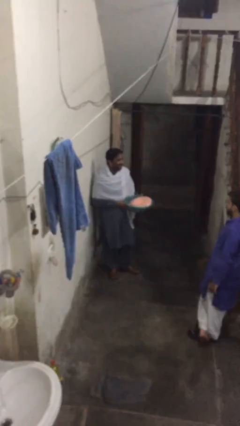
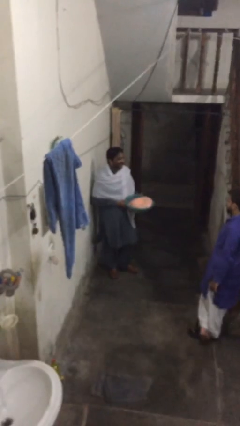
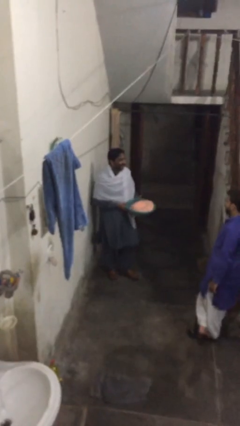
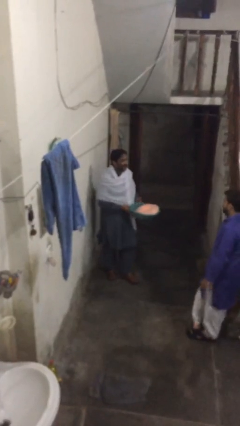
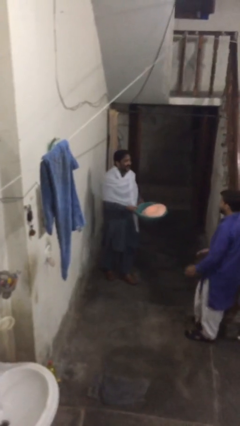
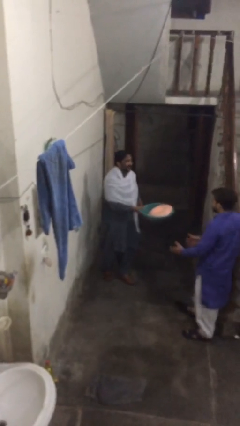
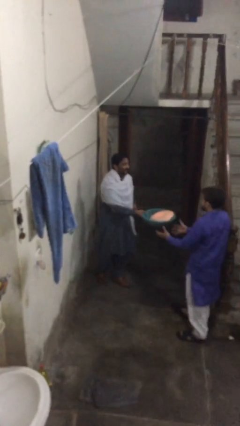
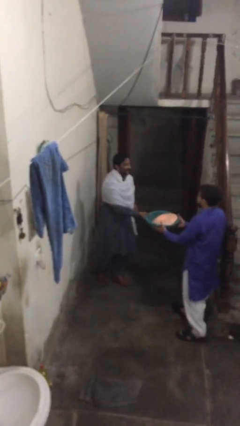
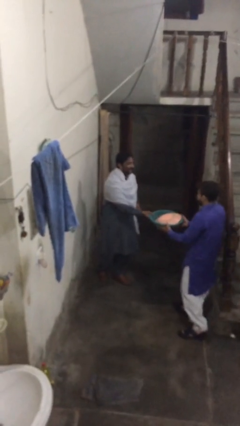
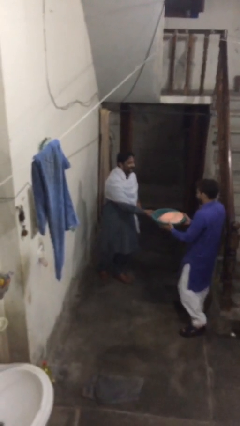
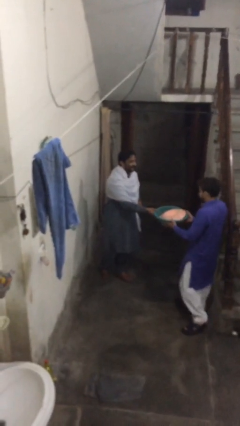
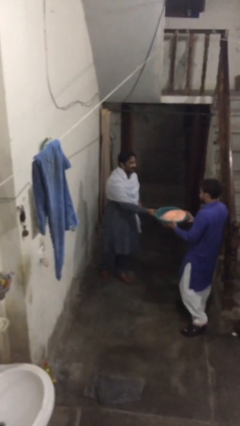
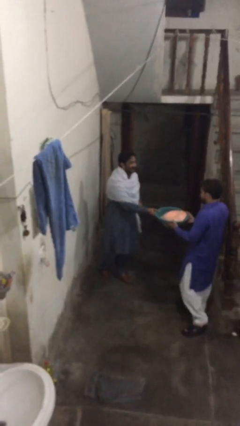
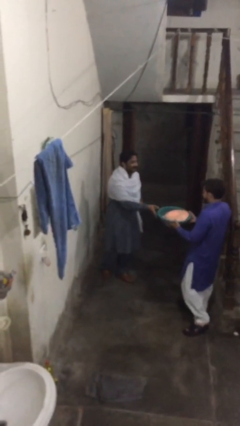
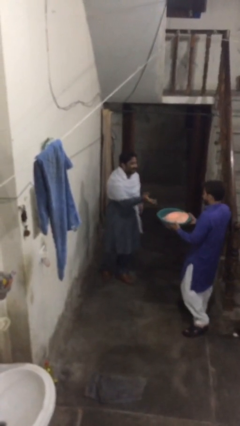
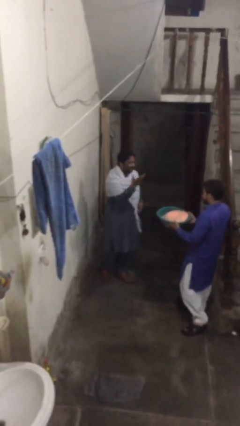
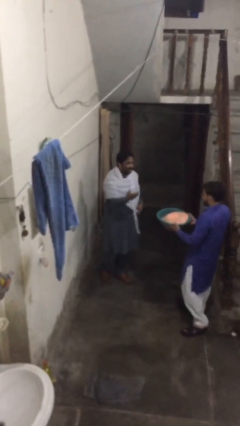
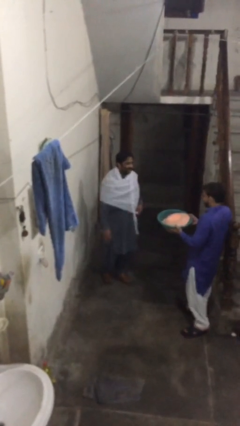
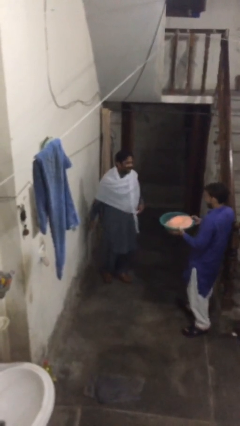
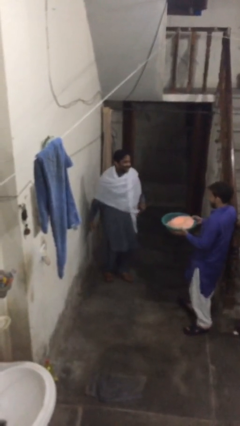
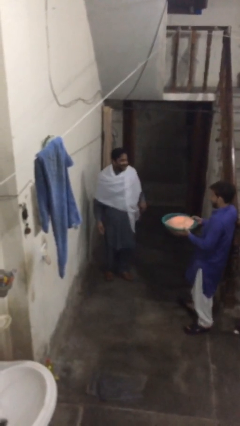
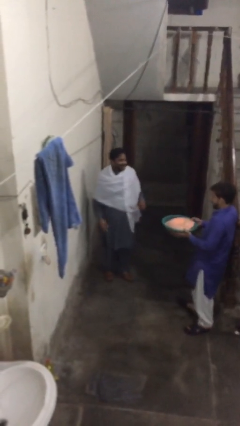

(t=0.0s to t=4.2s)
person transfers object to person

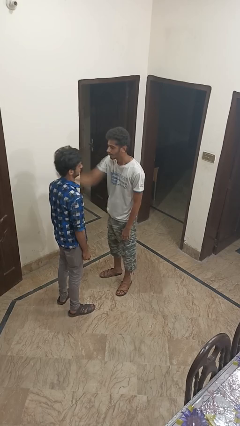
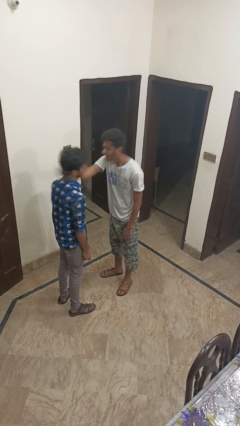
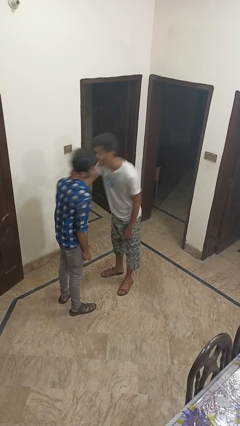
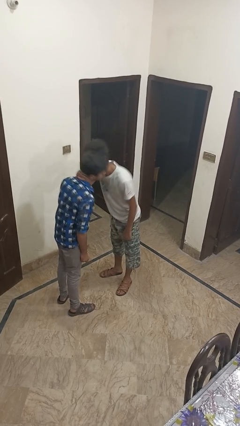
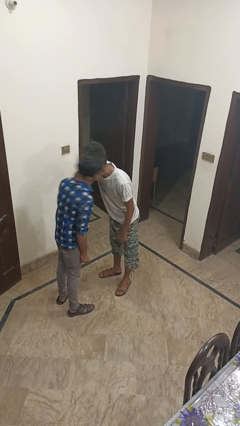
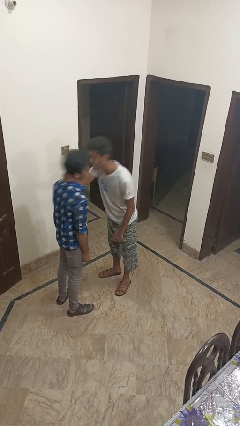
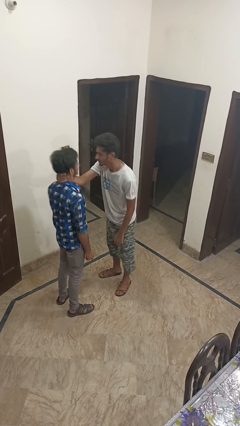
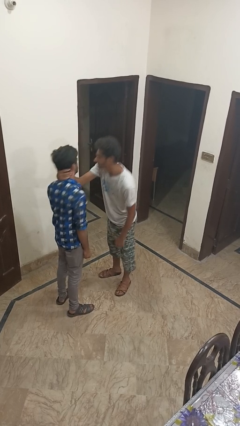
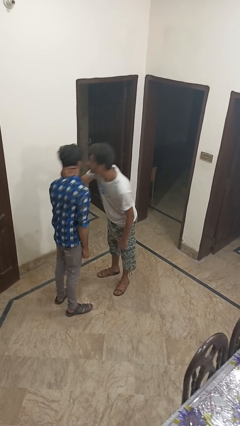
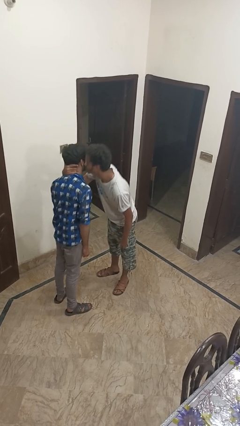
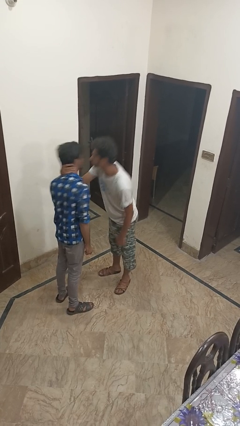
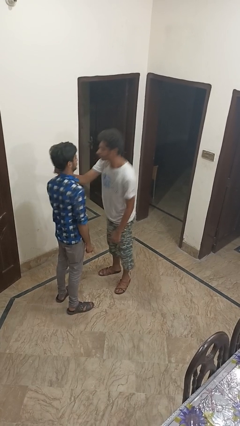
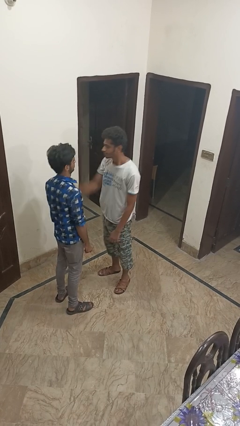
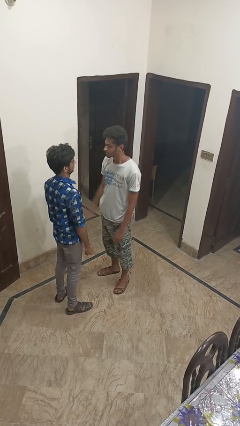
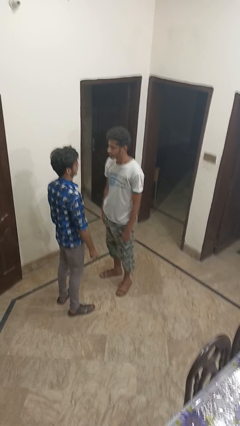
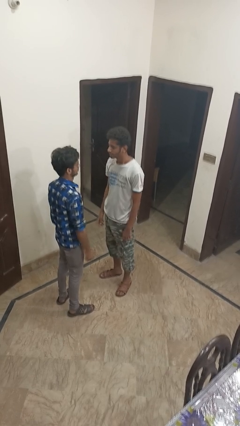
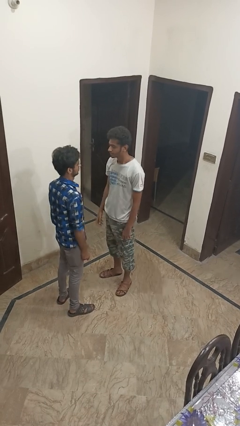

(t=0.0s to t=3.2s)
person kisses cheek of person

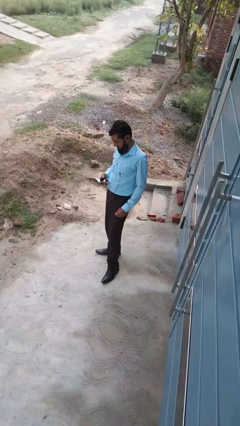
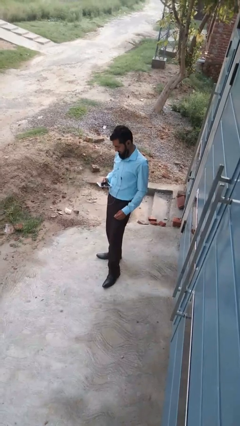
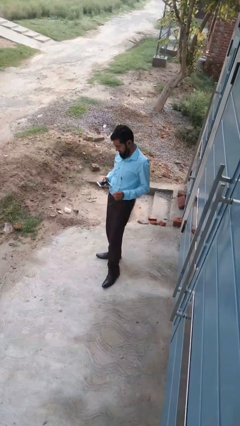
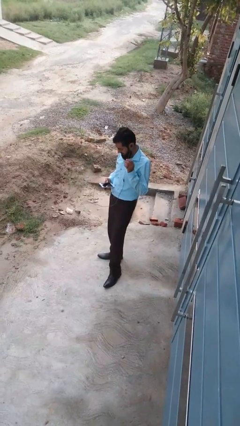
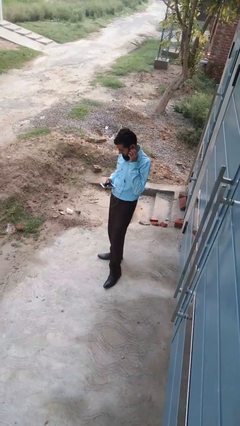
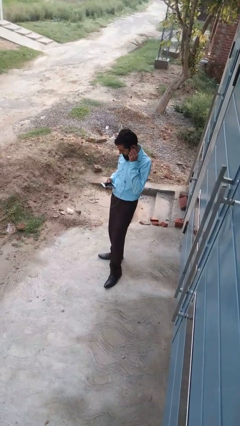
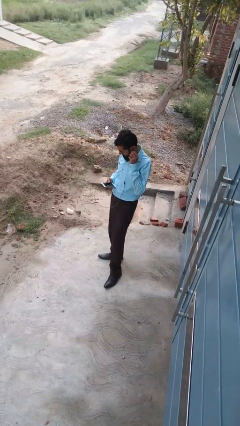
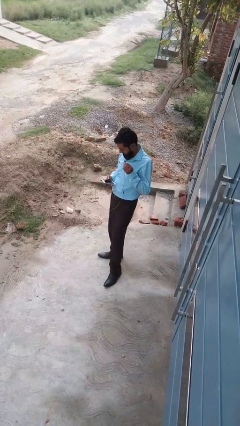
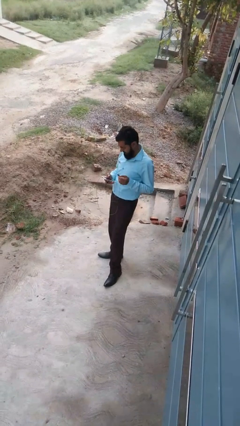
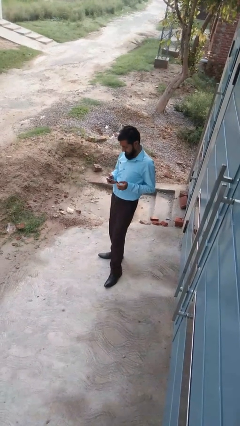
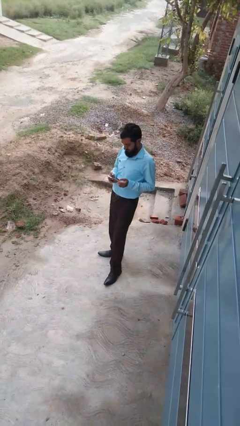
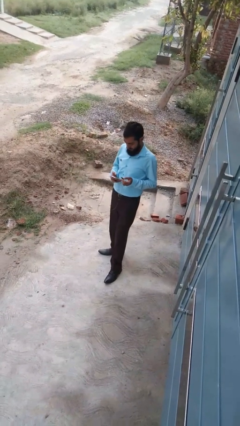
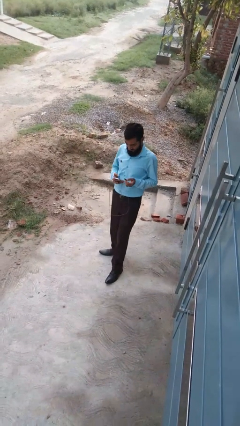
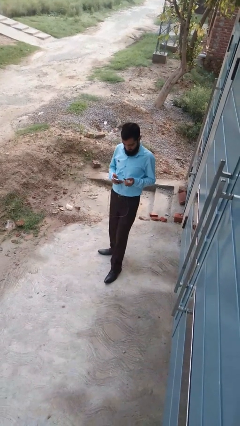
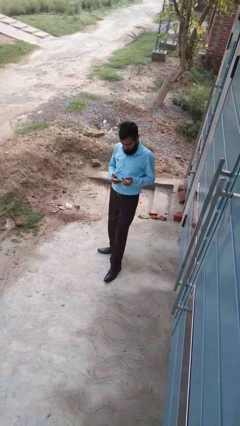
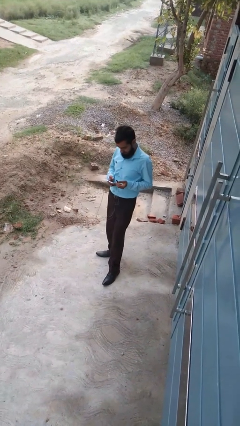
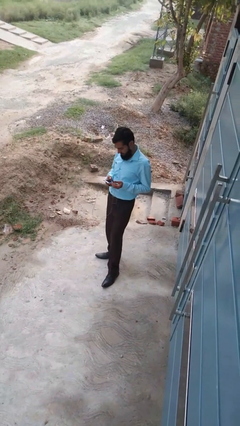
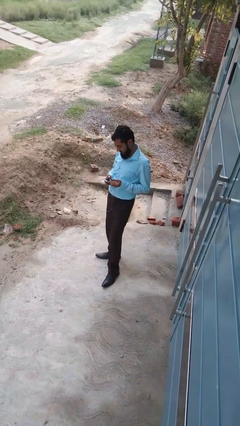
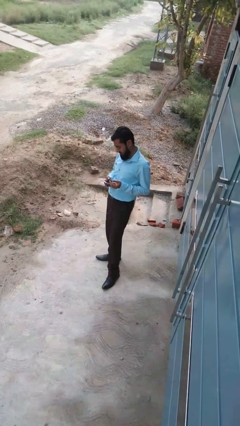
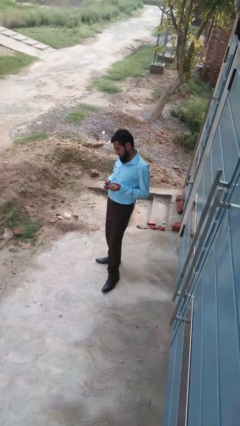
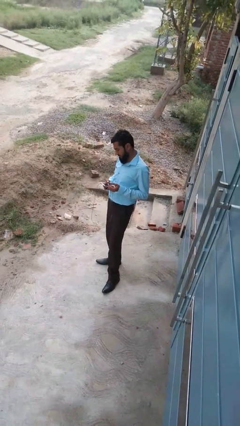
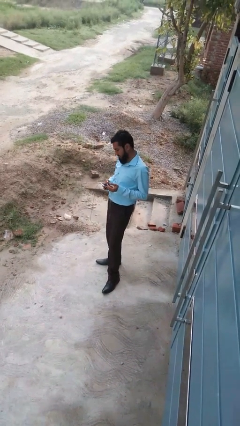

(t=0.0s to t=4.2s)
person takes off headphones

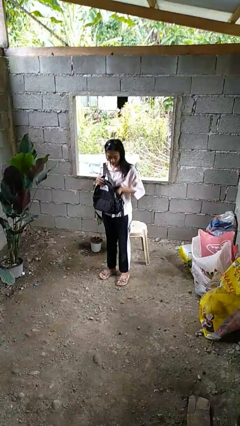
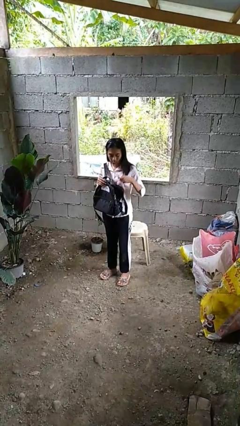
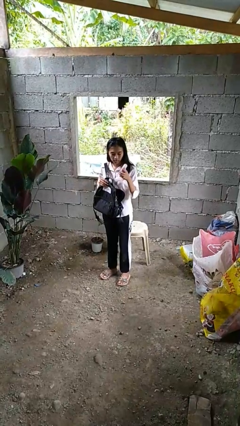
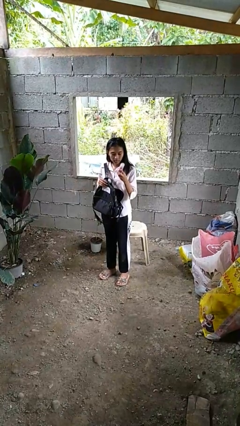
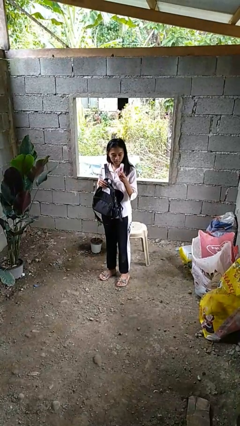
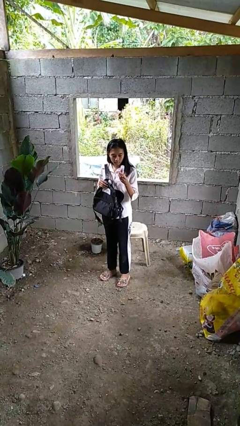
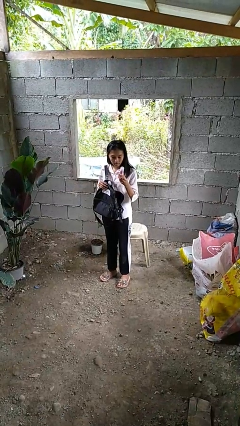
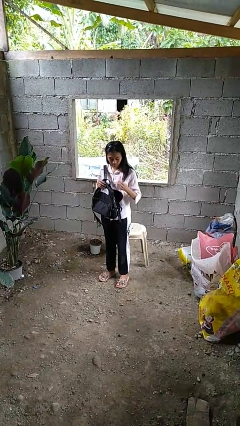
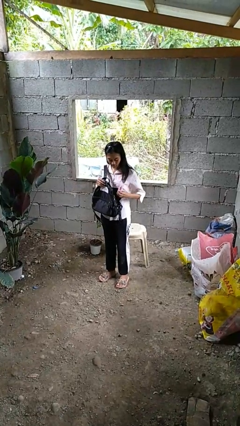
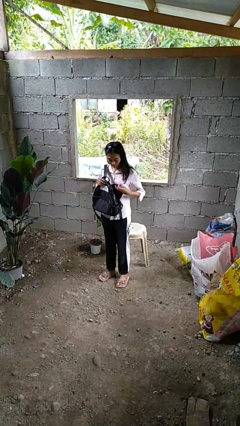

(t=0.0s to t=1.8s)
person takes object from backpack

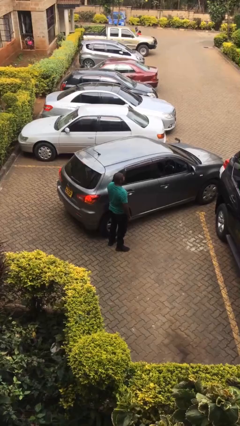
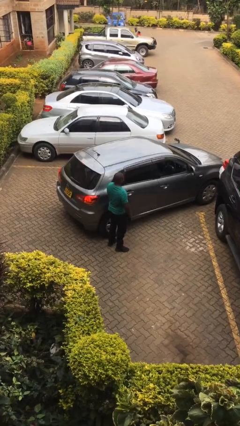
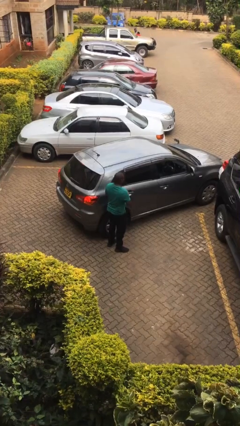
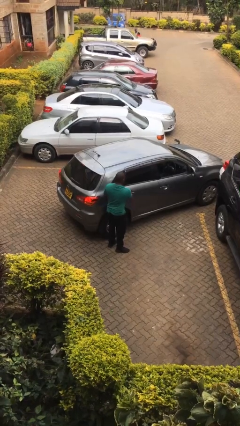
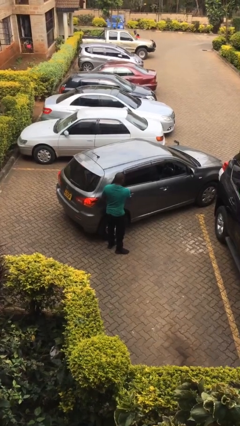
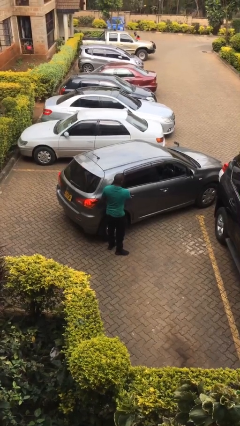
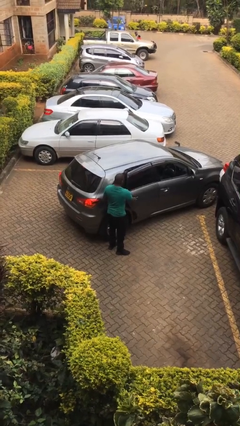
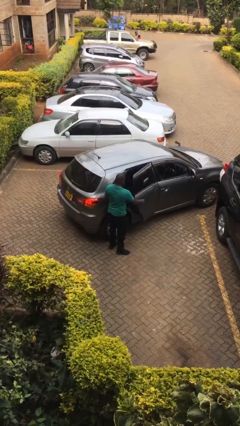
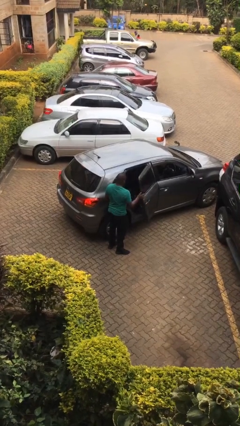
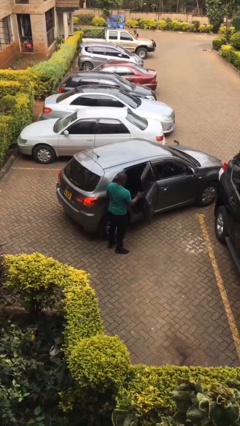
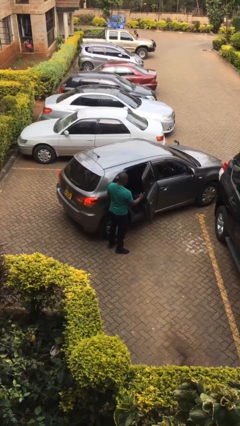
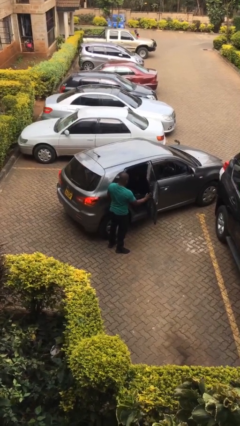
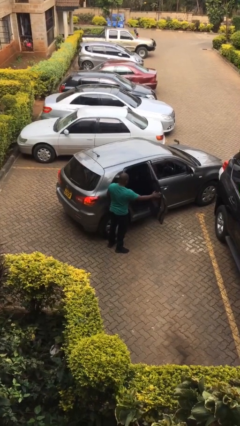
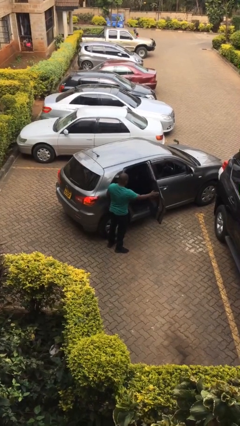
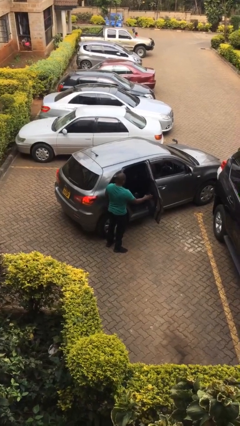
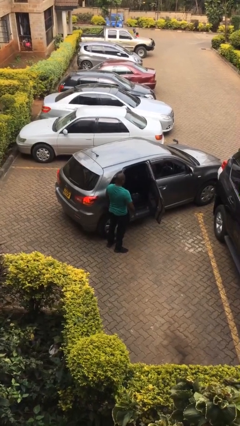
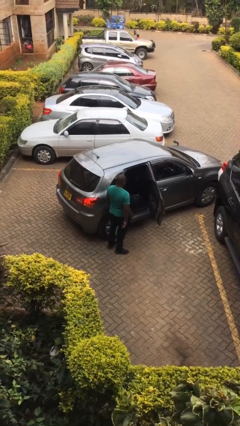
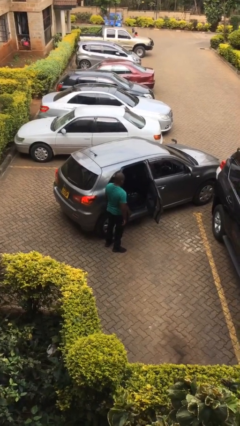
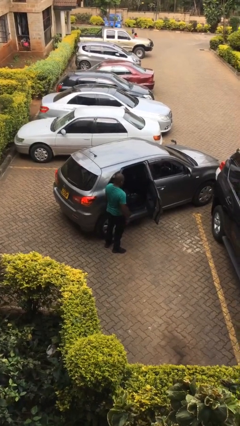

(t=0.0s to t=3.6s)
person opens car door

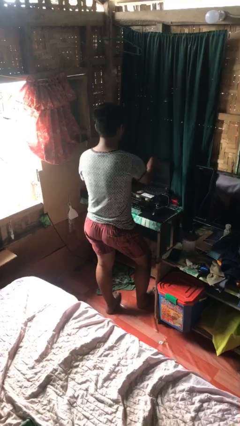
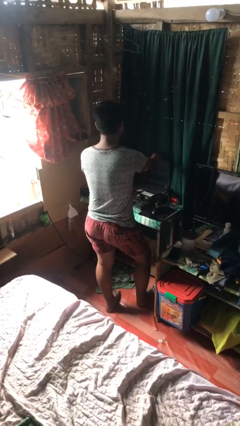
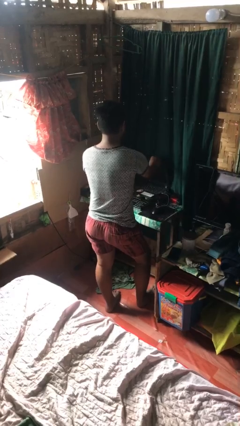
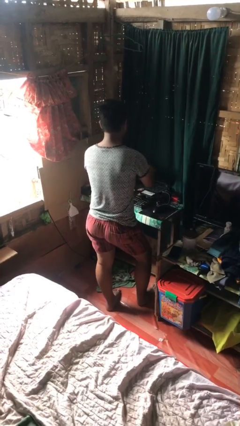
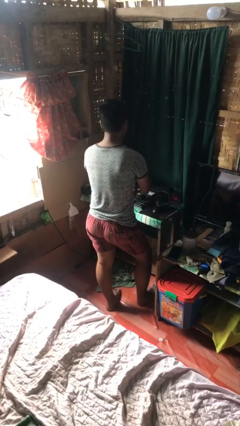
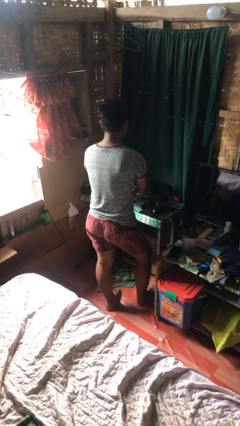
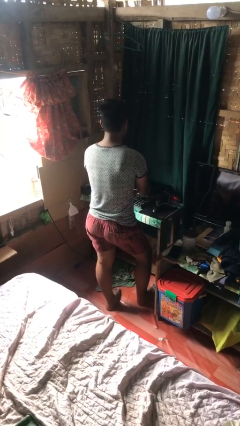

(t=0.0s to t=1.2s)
person closes laptop
